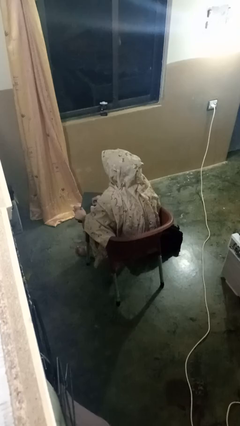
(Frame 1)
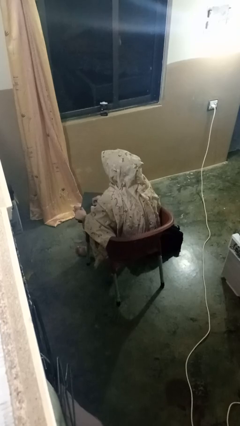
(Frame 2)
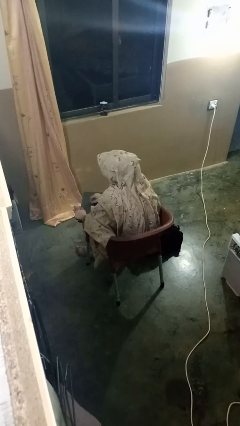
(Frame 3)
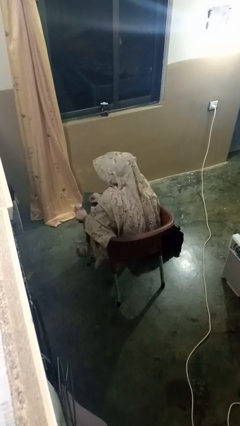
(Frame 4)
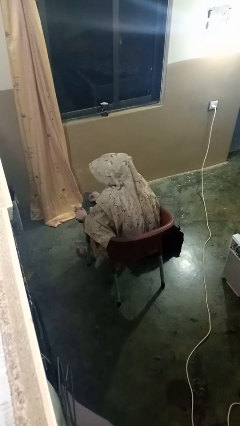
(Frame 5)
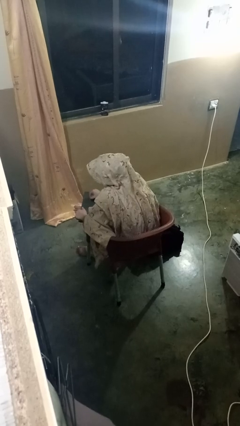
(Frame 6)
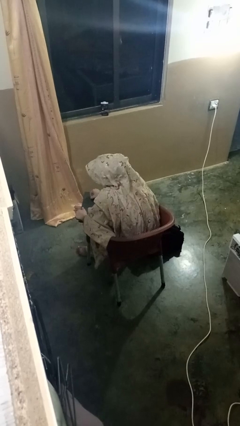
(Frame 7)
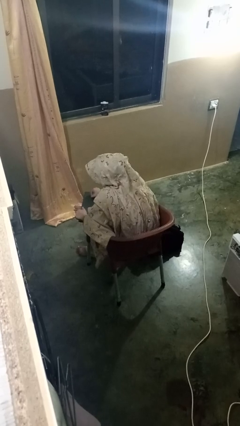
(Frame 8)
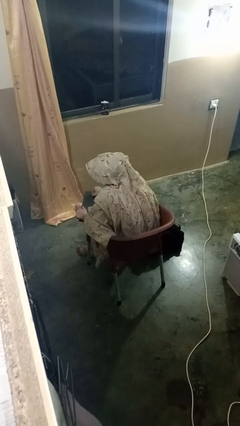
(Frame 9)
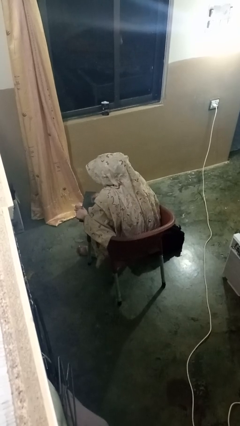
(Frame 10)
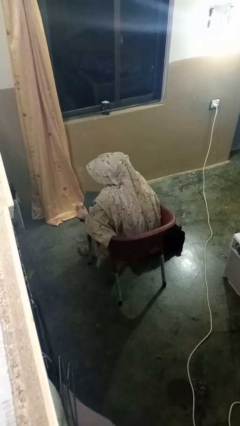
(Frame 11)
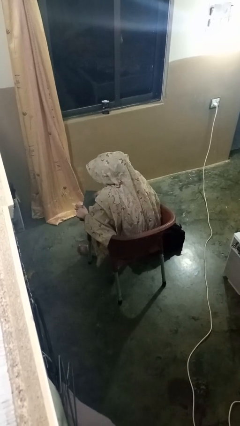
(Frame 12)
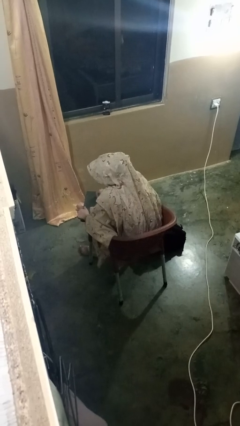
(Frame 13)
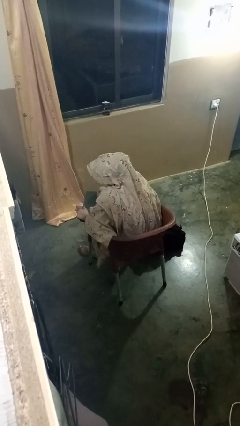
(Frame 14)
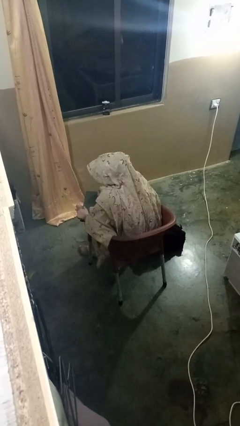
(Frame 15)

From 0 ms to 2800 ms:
person interacts with tablet

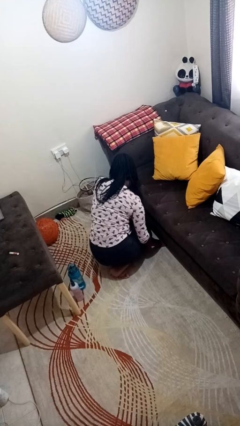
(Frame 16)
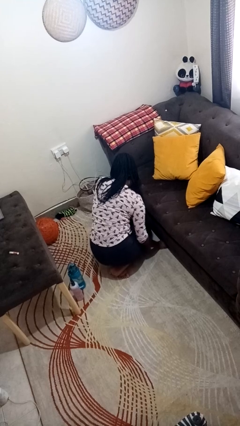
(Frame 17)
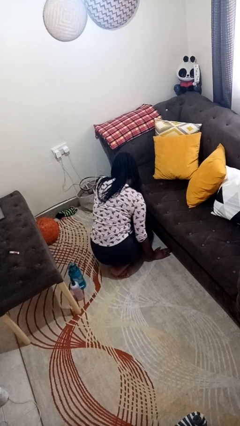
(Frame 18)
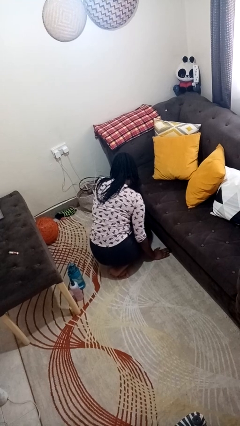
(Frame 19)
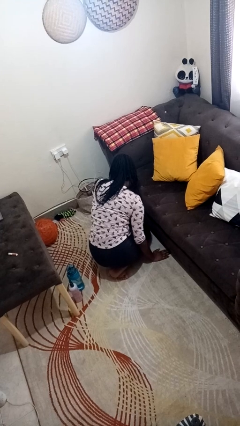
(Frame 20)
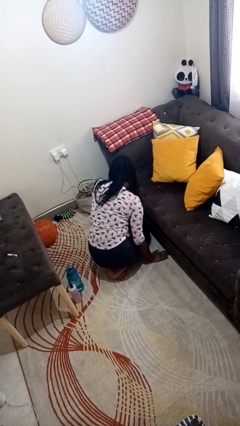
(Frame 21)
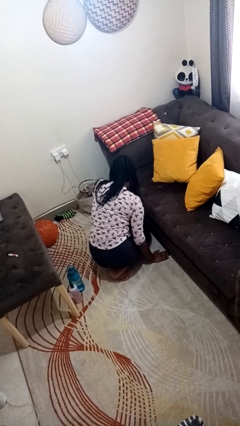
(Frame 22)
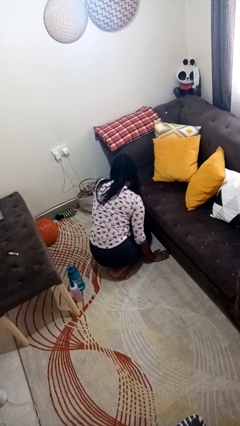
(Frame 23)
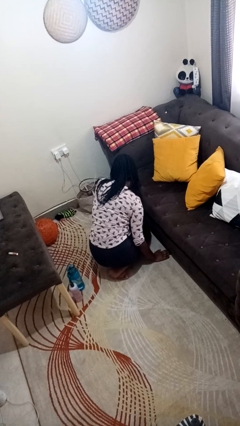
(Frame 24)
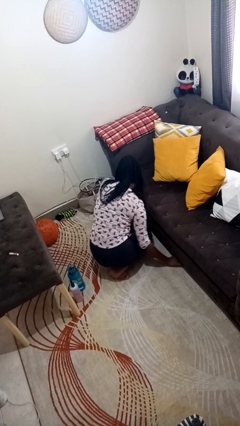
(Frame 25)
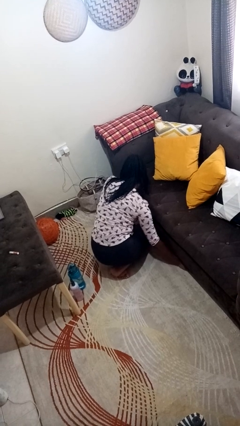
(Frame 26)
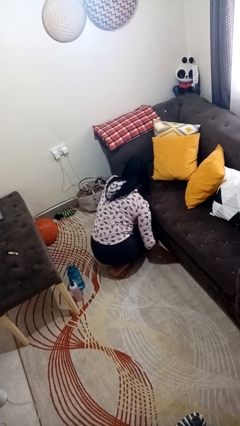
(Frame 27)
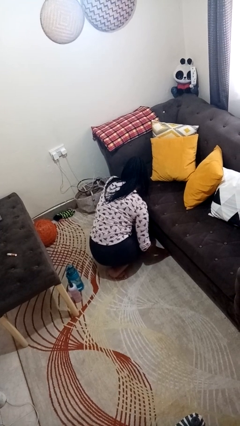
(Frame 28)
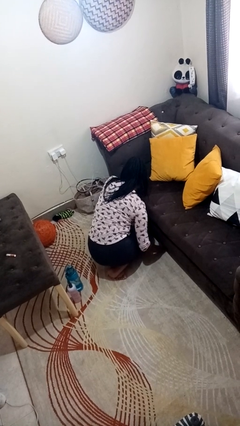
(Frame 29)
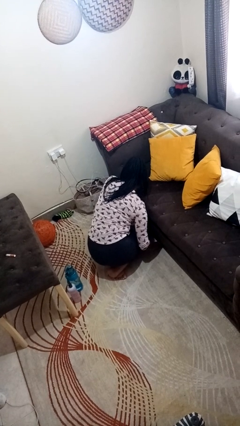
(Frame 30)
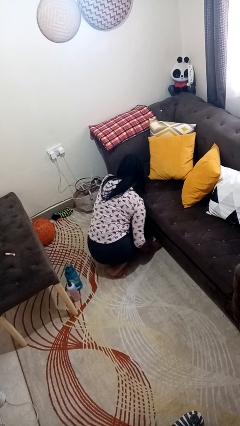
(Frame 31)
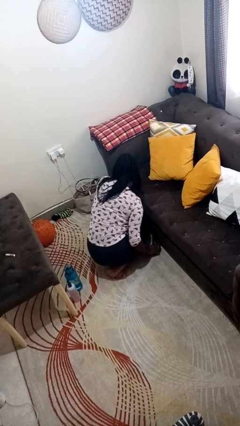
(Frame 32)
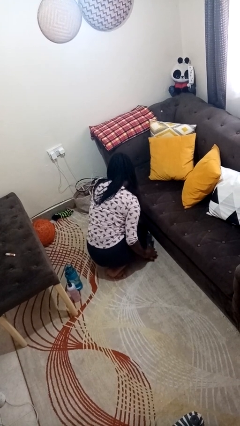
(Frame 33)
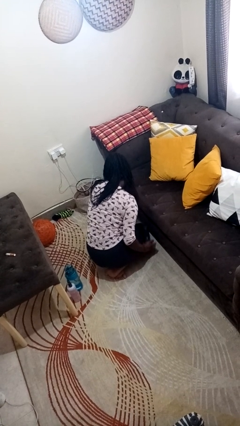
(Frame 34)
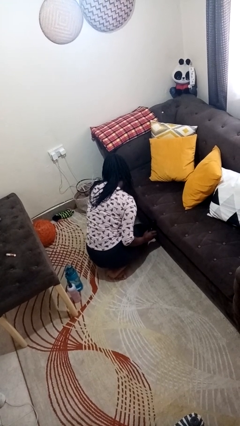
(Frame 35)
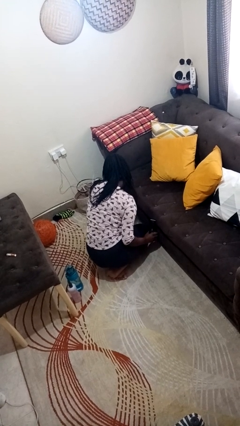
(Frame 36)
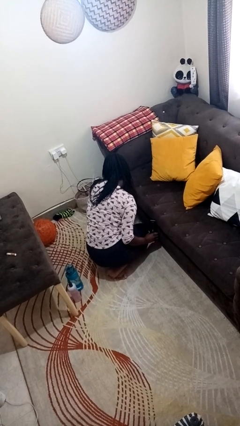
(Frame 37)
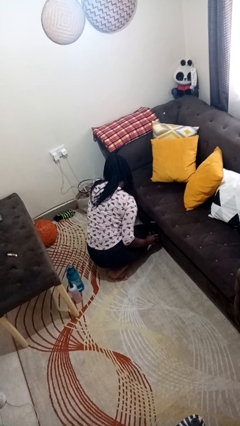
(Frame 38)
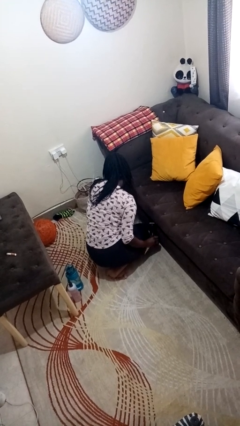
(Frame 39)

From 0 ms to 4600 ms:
person searches under couch

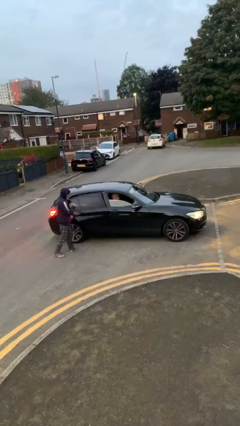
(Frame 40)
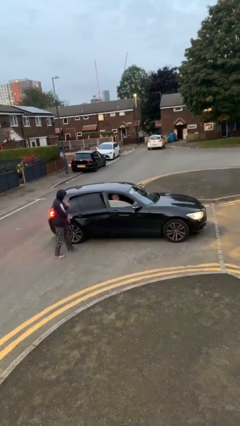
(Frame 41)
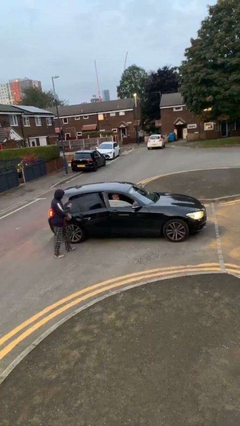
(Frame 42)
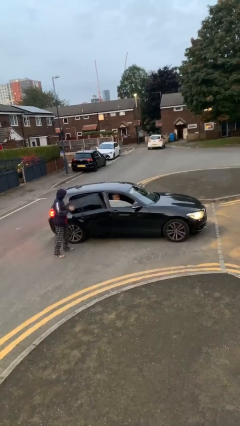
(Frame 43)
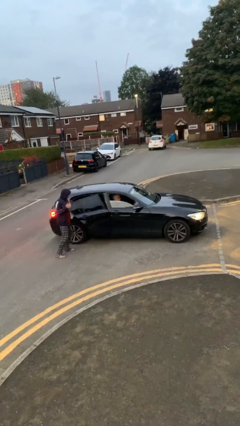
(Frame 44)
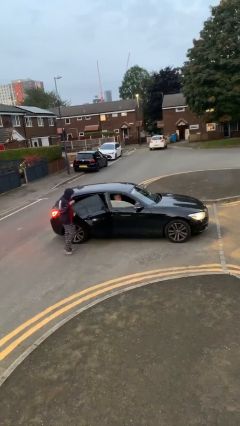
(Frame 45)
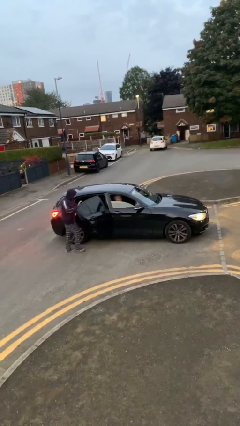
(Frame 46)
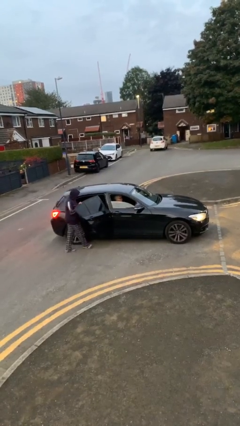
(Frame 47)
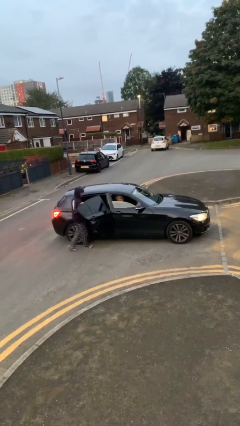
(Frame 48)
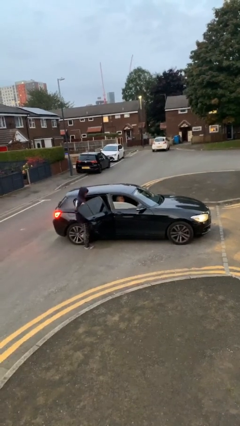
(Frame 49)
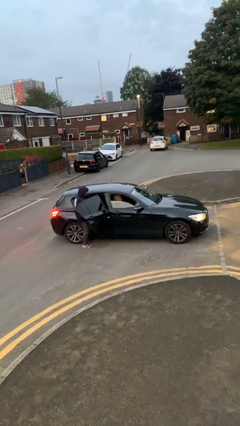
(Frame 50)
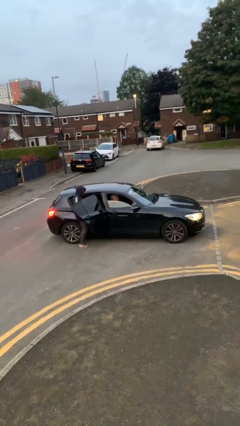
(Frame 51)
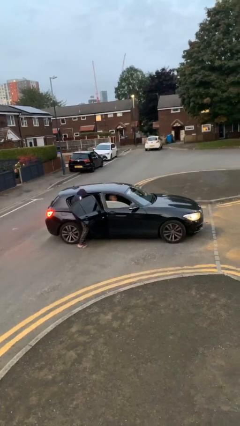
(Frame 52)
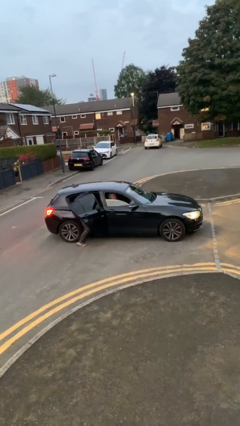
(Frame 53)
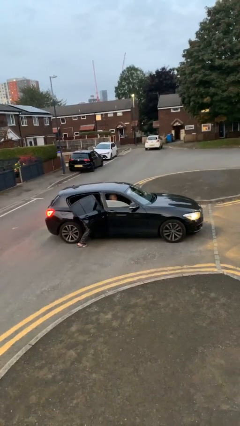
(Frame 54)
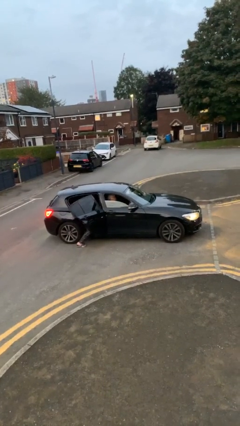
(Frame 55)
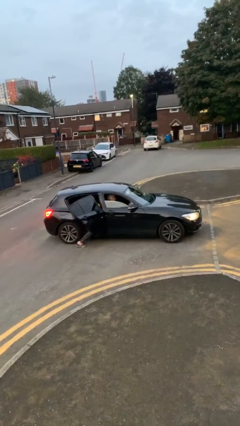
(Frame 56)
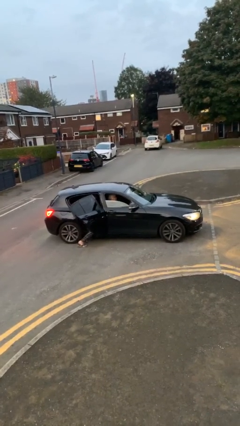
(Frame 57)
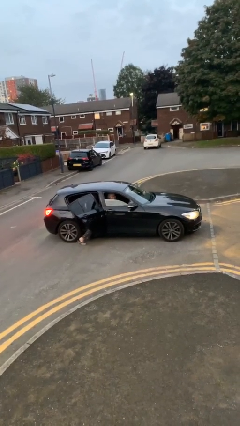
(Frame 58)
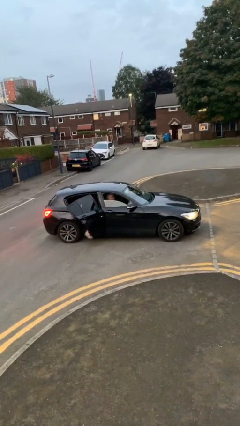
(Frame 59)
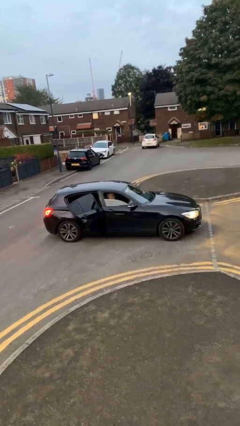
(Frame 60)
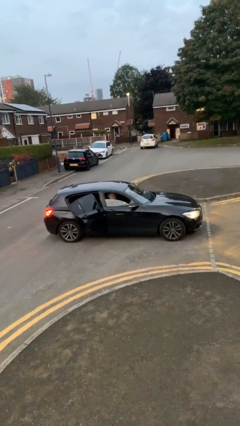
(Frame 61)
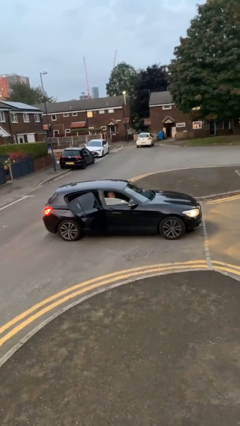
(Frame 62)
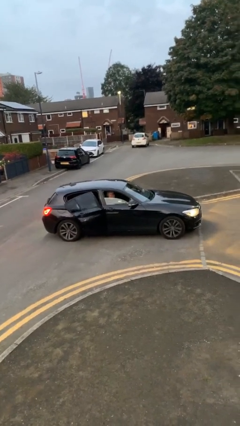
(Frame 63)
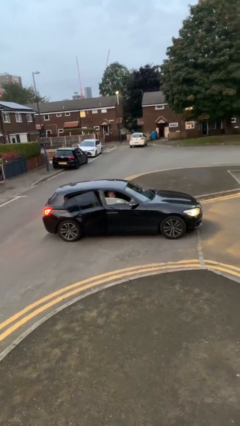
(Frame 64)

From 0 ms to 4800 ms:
car picks up person

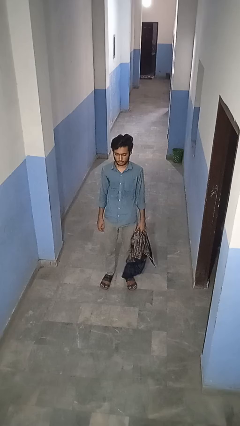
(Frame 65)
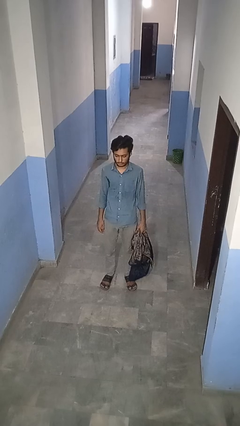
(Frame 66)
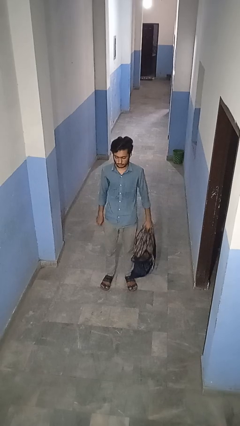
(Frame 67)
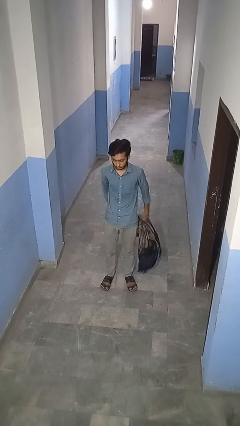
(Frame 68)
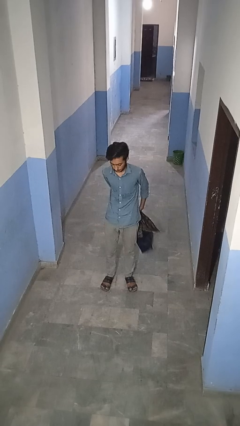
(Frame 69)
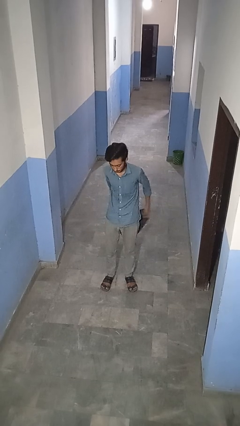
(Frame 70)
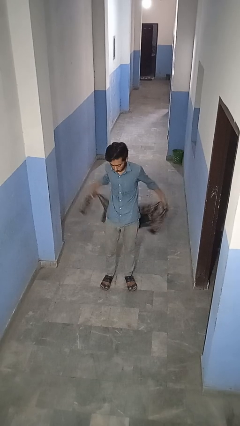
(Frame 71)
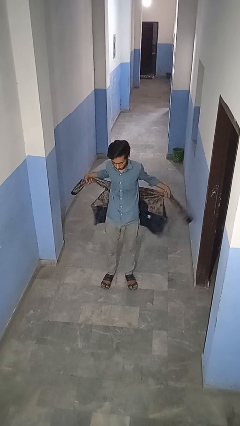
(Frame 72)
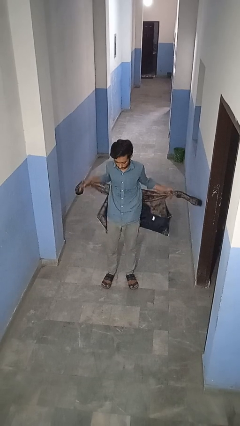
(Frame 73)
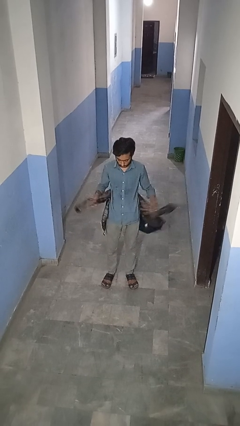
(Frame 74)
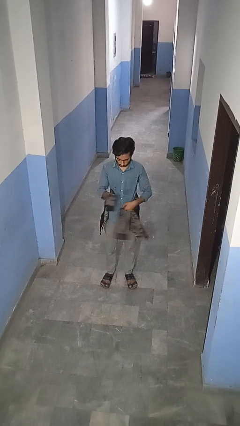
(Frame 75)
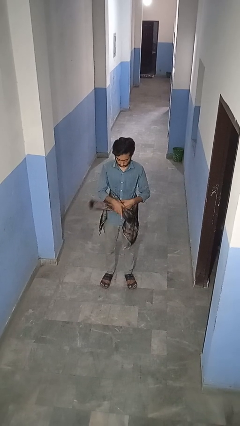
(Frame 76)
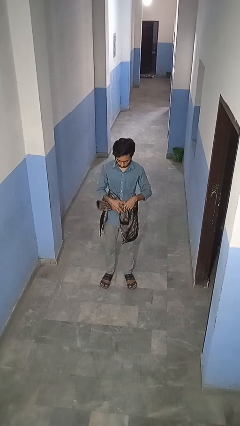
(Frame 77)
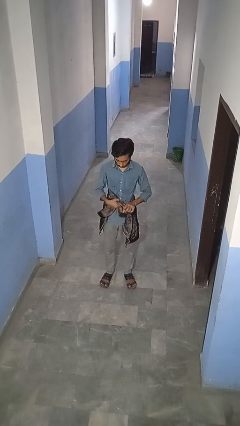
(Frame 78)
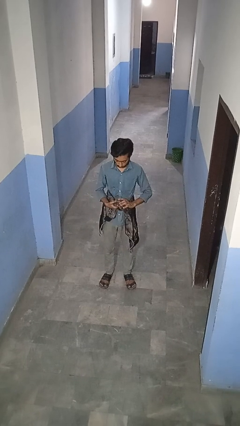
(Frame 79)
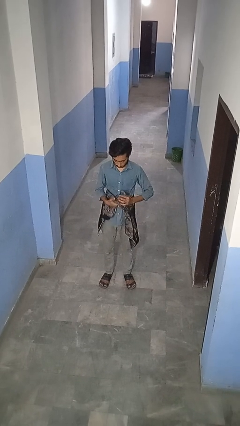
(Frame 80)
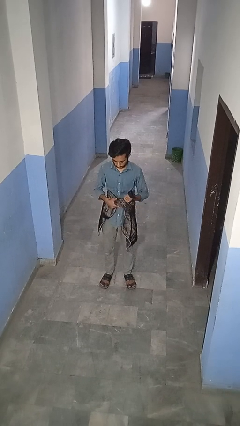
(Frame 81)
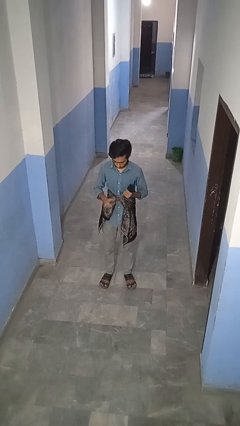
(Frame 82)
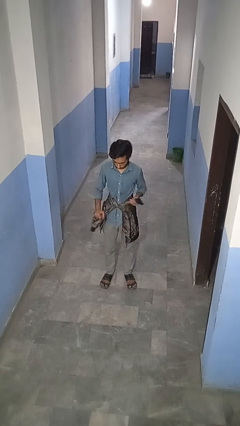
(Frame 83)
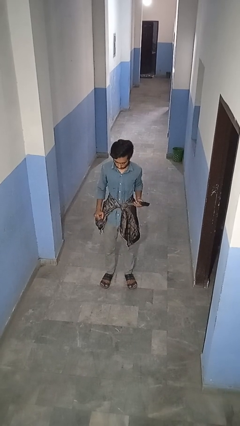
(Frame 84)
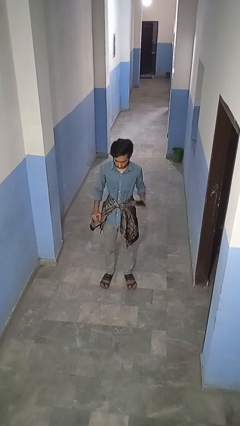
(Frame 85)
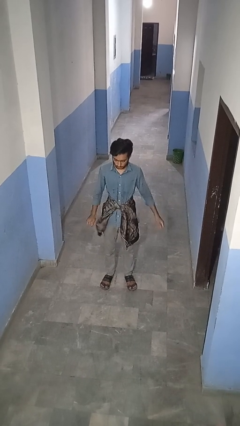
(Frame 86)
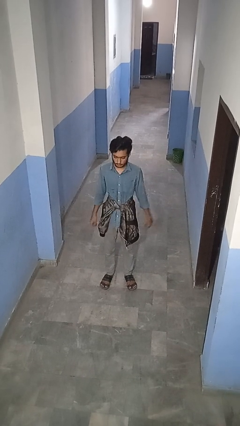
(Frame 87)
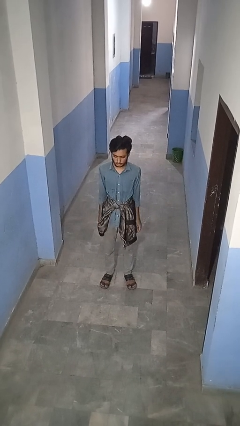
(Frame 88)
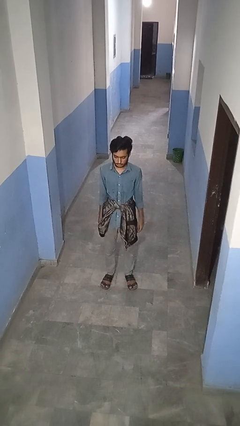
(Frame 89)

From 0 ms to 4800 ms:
person ties jacket around waist

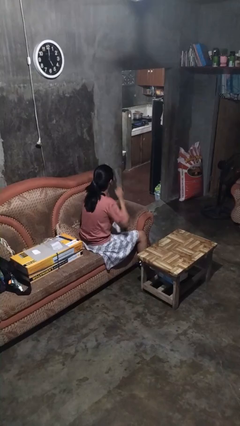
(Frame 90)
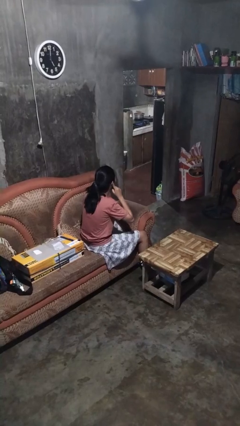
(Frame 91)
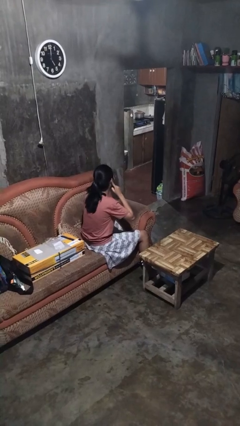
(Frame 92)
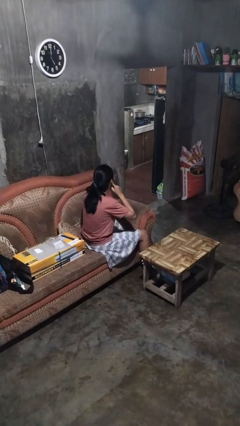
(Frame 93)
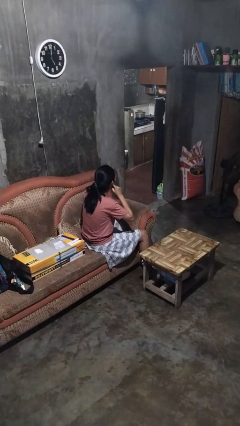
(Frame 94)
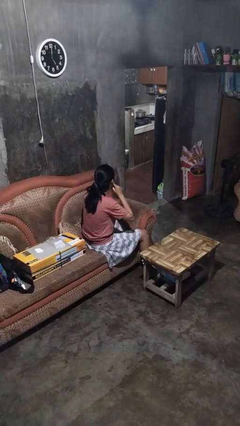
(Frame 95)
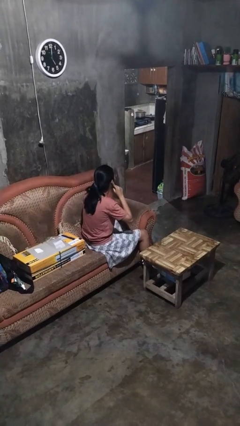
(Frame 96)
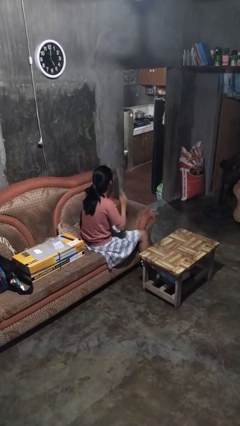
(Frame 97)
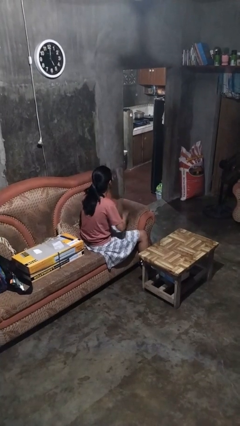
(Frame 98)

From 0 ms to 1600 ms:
person puts fingers in ear
